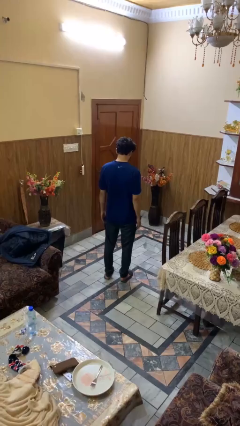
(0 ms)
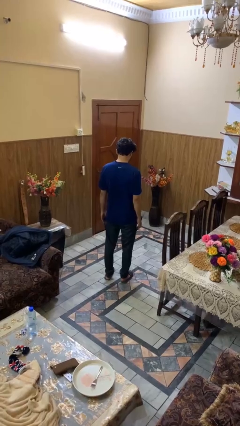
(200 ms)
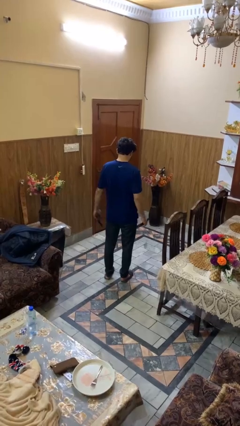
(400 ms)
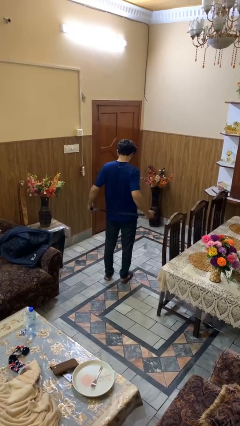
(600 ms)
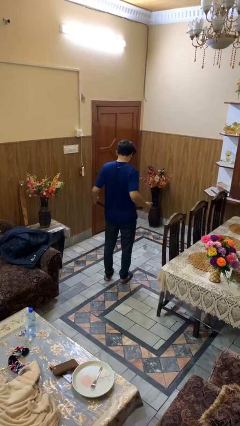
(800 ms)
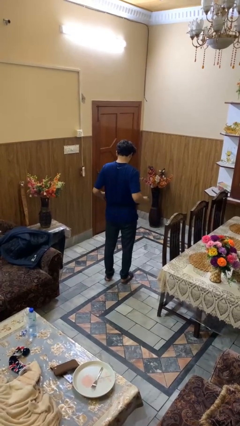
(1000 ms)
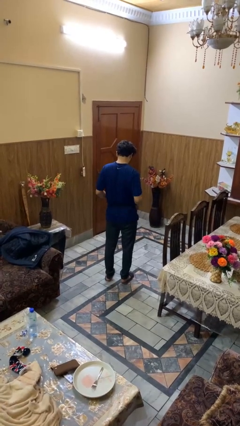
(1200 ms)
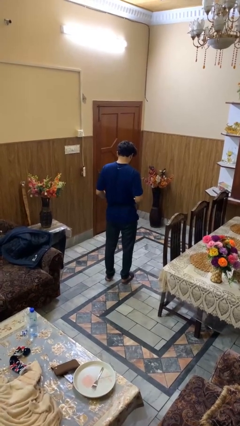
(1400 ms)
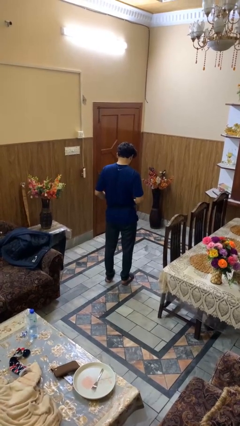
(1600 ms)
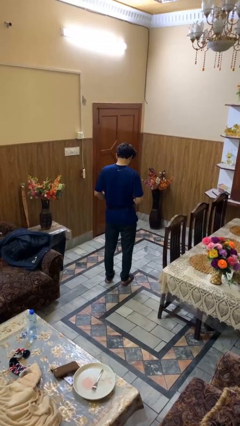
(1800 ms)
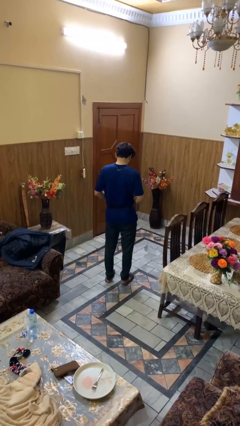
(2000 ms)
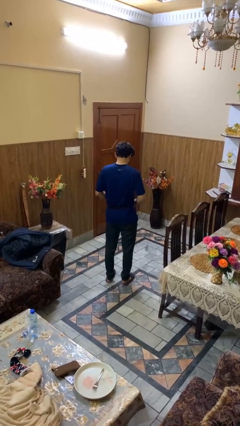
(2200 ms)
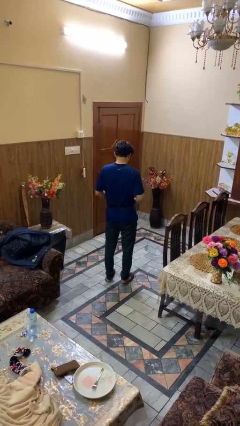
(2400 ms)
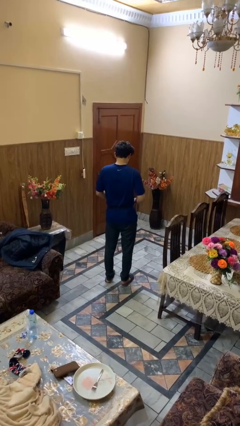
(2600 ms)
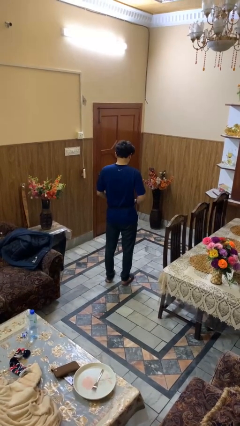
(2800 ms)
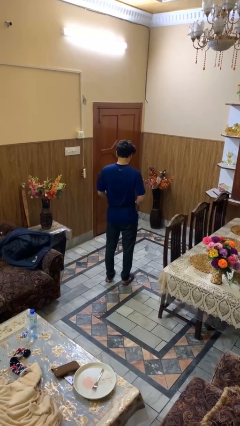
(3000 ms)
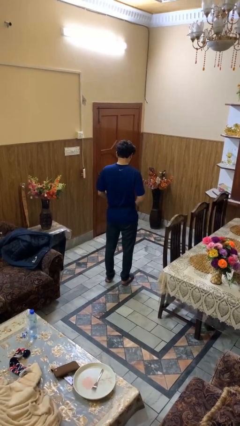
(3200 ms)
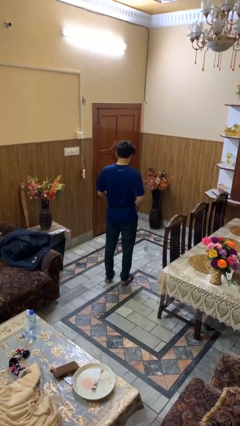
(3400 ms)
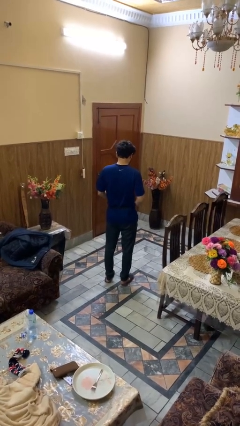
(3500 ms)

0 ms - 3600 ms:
person puts on belt

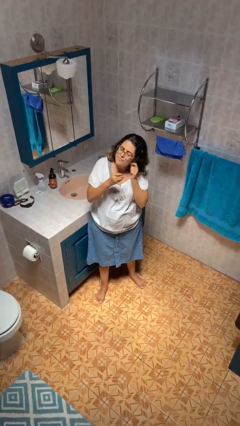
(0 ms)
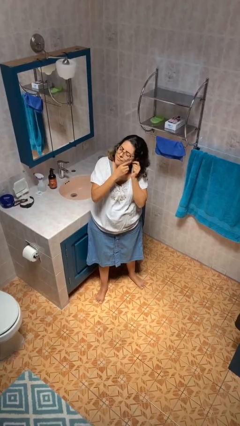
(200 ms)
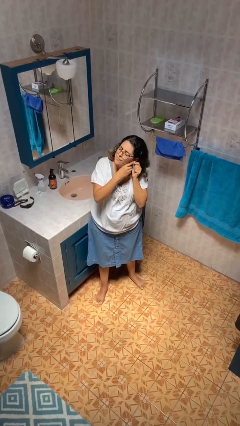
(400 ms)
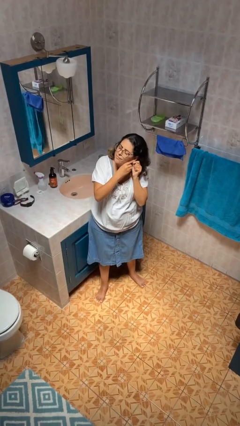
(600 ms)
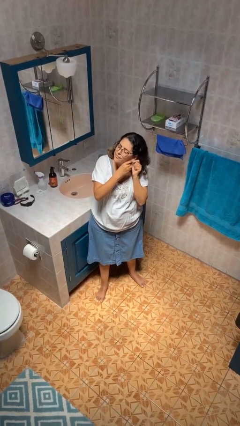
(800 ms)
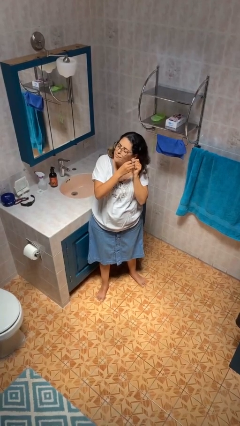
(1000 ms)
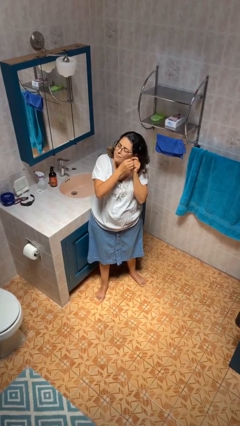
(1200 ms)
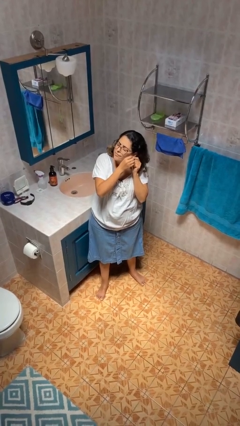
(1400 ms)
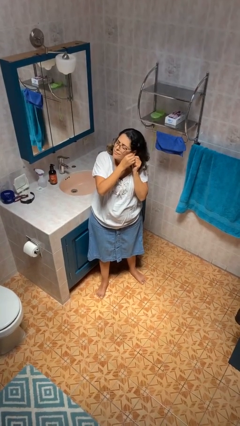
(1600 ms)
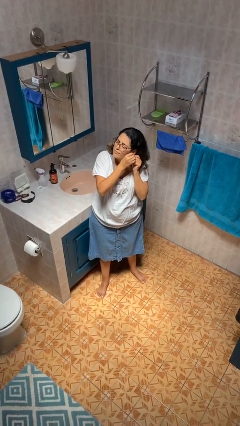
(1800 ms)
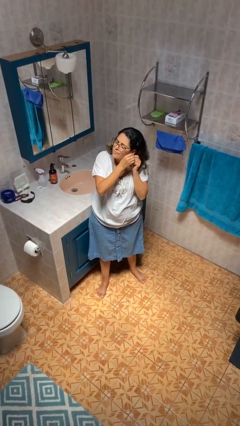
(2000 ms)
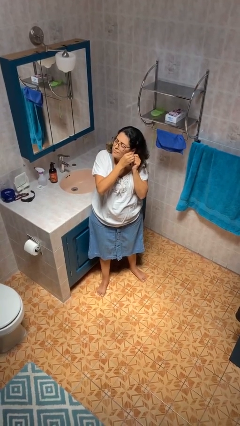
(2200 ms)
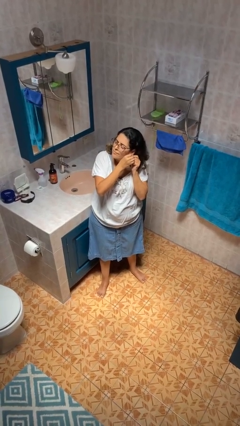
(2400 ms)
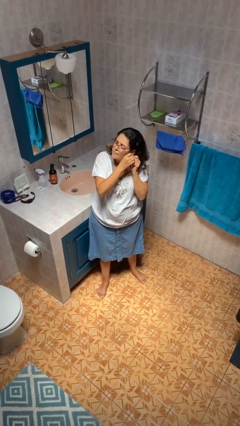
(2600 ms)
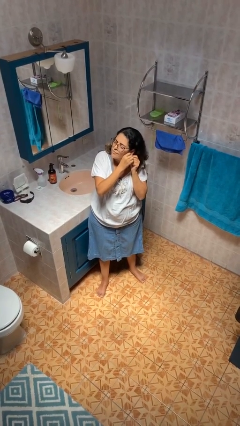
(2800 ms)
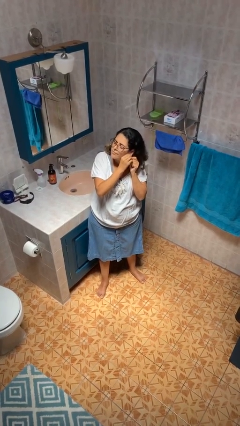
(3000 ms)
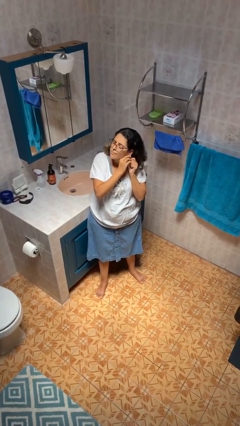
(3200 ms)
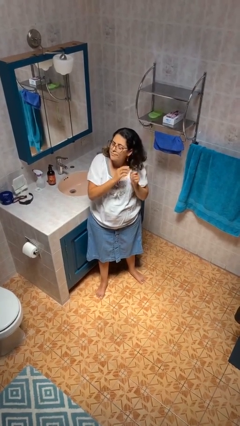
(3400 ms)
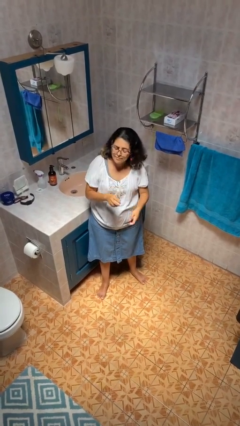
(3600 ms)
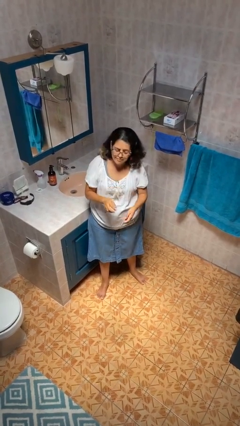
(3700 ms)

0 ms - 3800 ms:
person puts on earrings

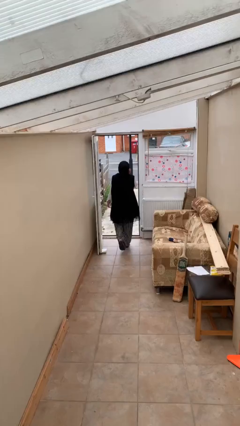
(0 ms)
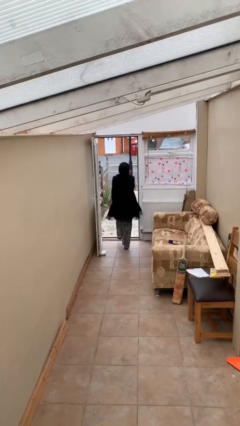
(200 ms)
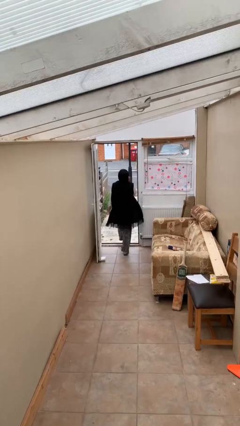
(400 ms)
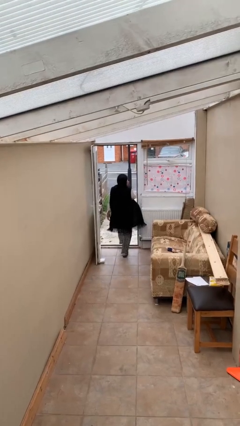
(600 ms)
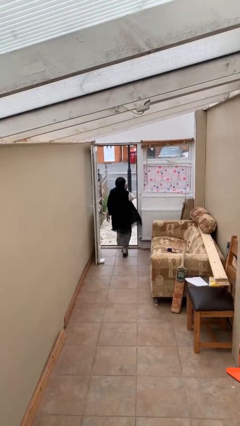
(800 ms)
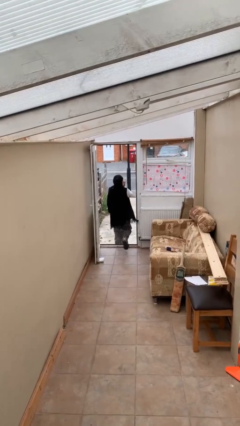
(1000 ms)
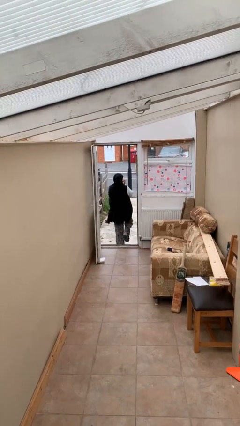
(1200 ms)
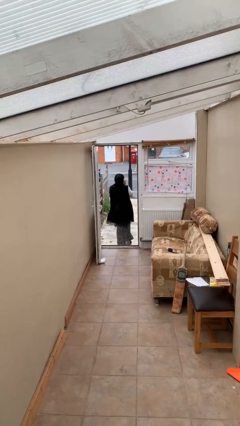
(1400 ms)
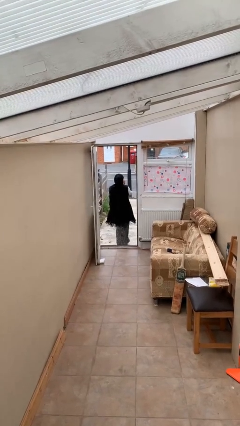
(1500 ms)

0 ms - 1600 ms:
person exits scene through structure

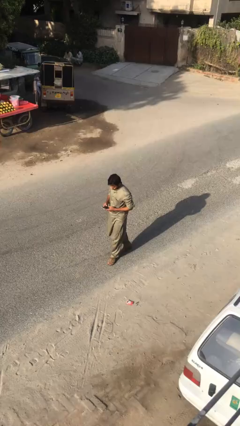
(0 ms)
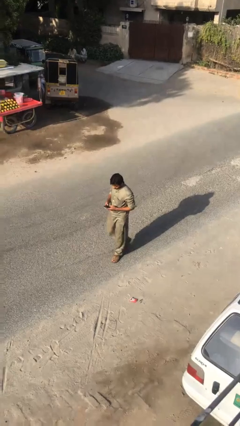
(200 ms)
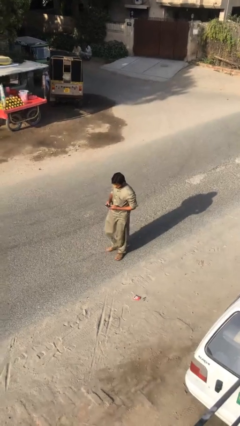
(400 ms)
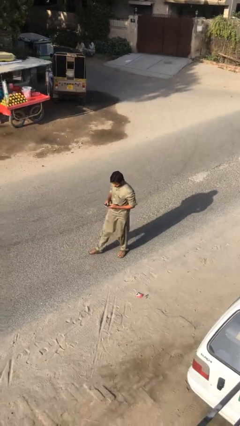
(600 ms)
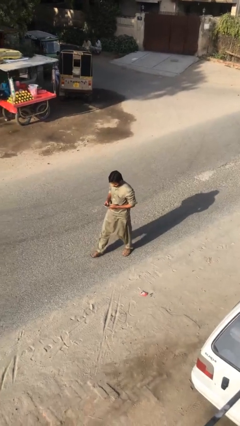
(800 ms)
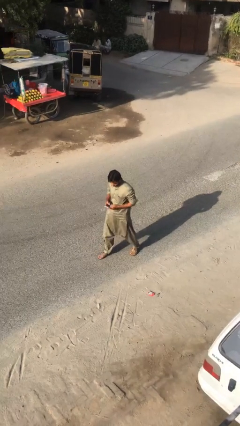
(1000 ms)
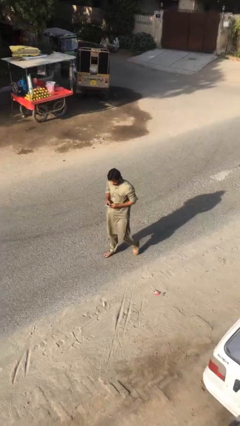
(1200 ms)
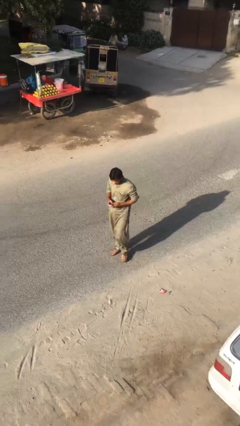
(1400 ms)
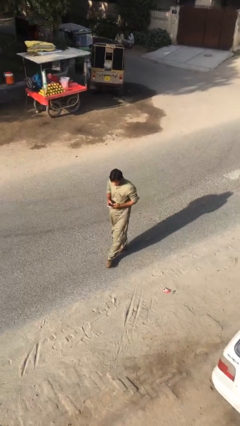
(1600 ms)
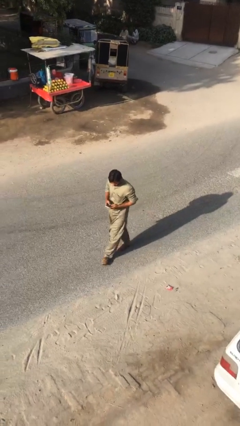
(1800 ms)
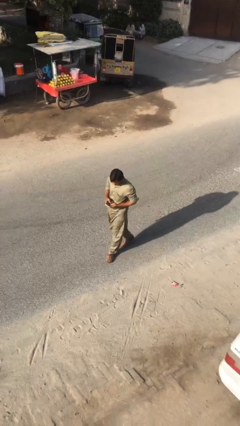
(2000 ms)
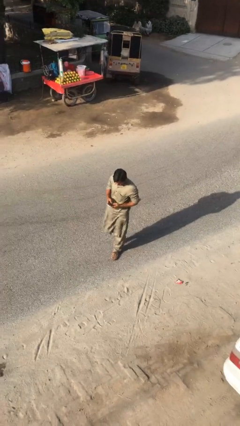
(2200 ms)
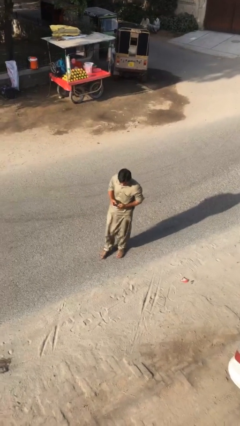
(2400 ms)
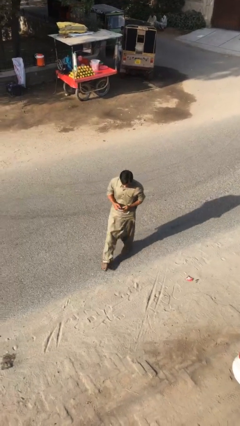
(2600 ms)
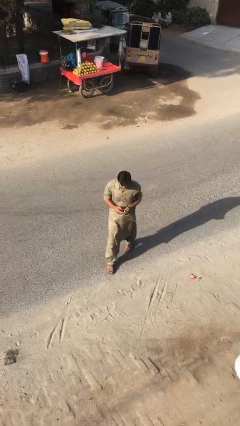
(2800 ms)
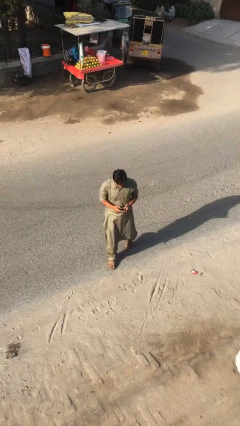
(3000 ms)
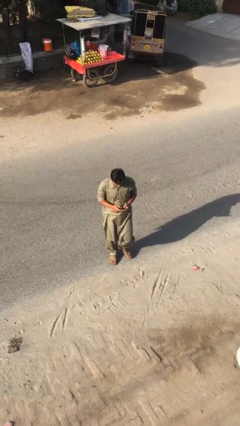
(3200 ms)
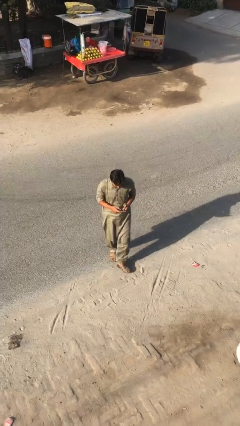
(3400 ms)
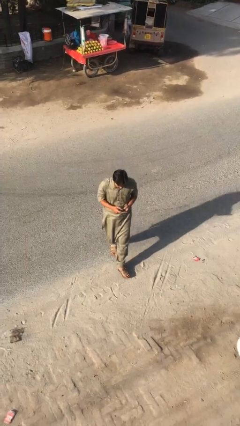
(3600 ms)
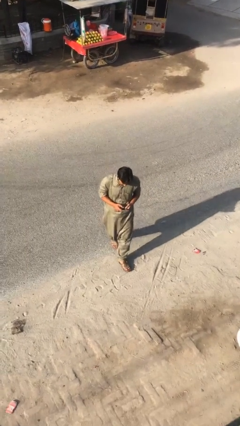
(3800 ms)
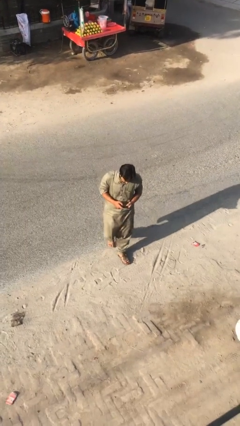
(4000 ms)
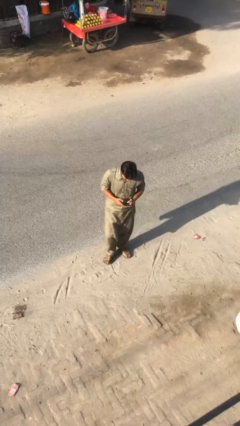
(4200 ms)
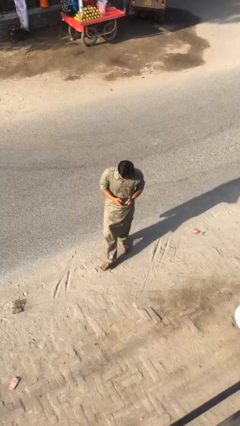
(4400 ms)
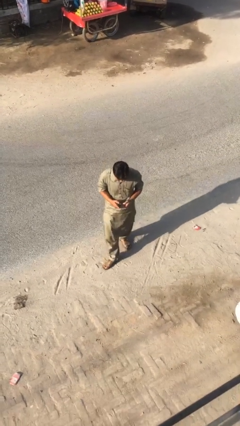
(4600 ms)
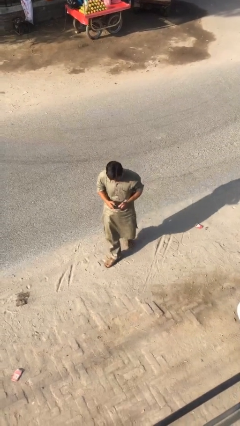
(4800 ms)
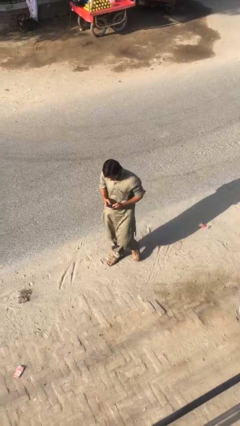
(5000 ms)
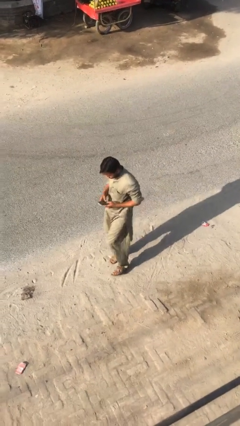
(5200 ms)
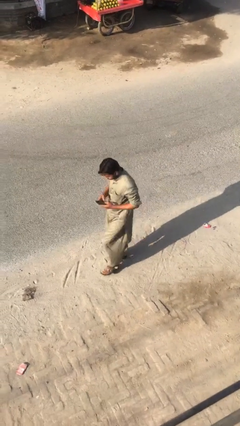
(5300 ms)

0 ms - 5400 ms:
person texts on phone

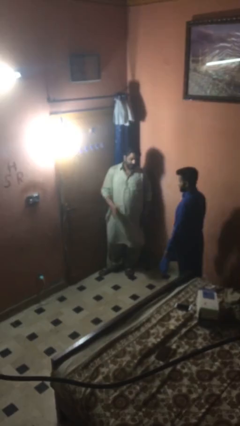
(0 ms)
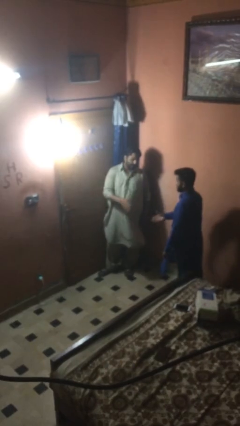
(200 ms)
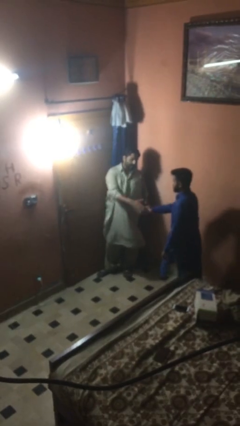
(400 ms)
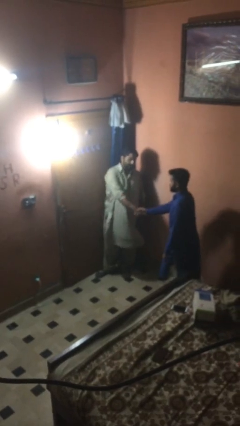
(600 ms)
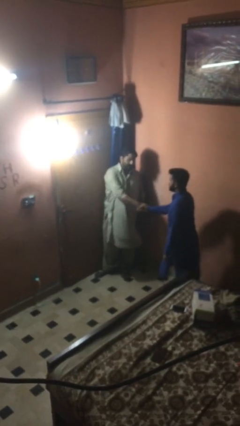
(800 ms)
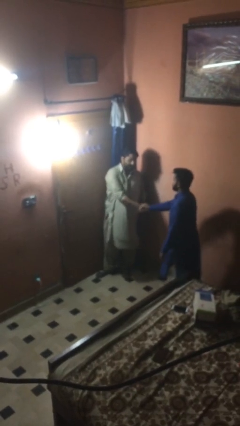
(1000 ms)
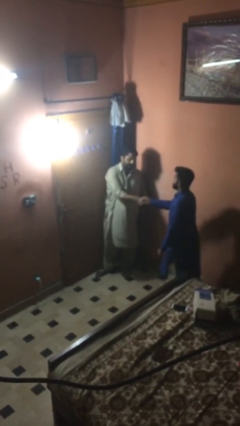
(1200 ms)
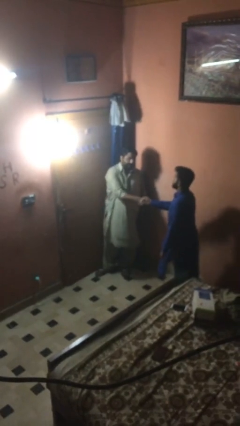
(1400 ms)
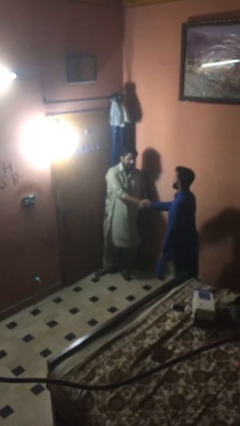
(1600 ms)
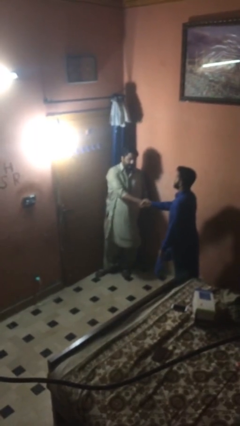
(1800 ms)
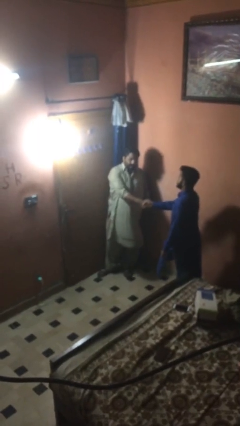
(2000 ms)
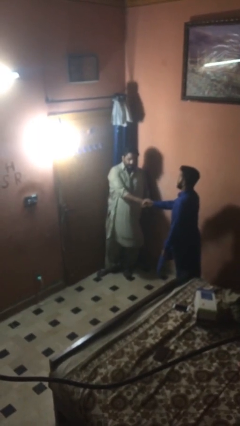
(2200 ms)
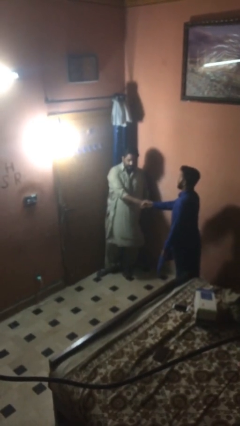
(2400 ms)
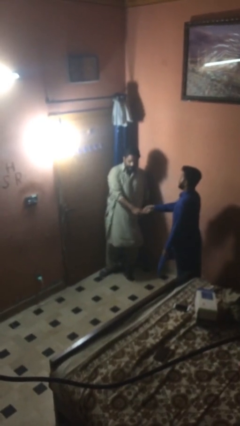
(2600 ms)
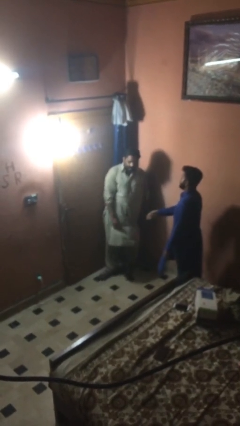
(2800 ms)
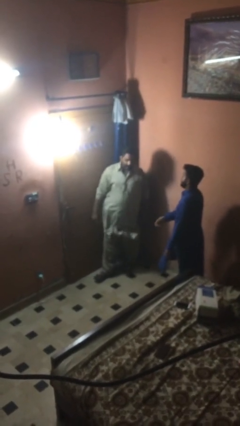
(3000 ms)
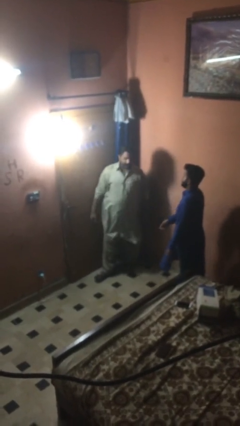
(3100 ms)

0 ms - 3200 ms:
person shakes hand
